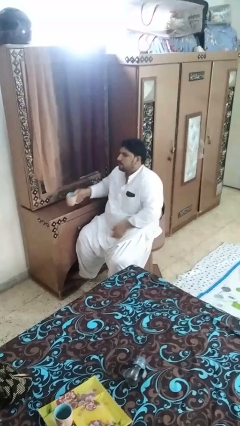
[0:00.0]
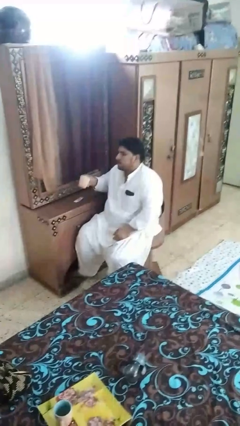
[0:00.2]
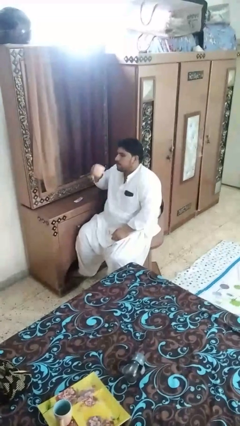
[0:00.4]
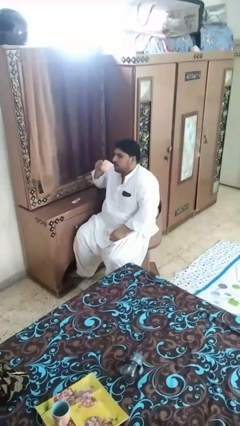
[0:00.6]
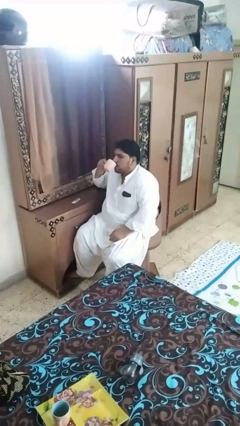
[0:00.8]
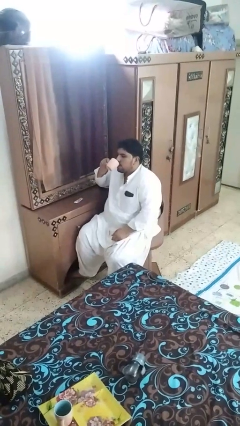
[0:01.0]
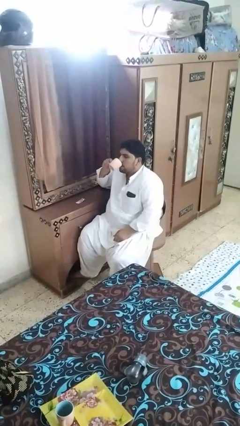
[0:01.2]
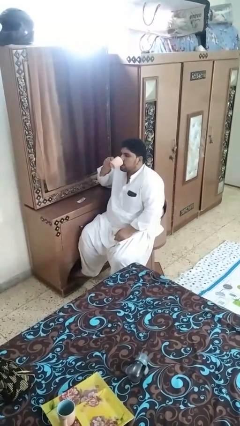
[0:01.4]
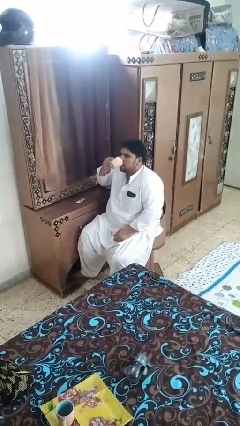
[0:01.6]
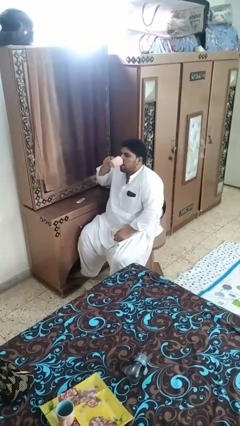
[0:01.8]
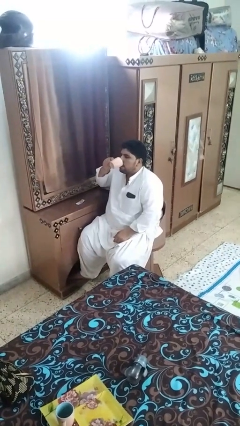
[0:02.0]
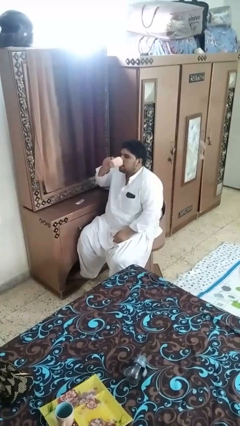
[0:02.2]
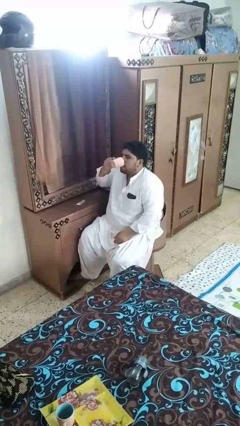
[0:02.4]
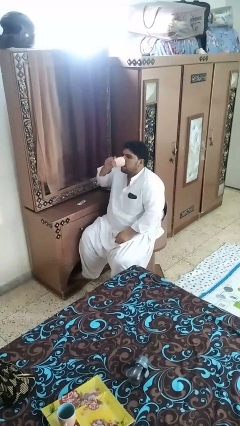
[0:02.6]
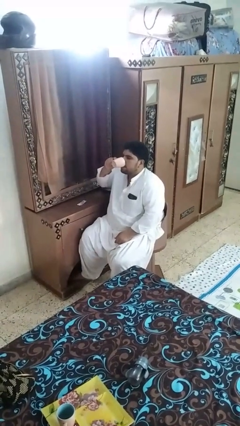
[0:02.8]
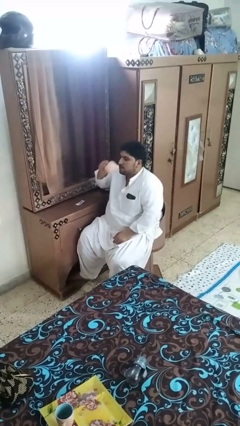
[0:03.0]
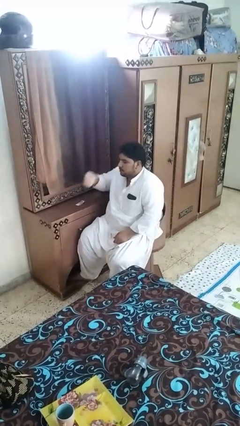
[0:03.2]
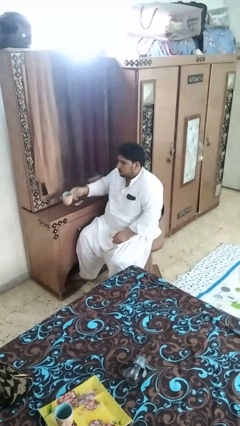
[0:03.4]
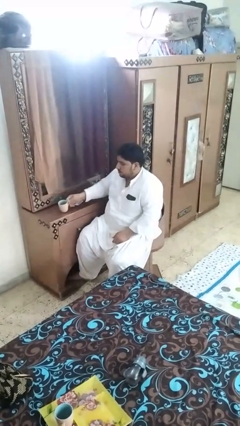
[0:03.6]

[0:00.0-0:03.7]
person drinks from cup

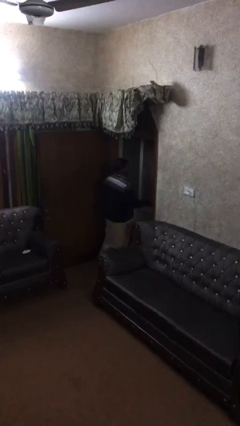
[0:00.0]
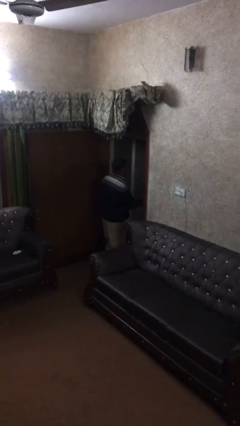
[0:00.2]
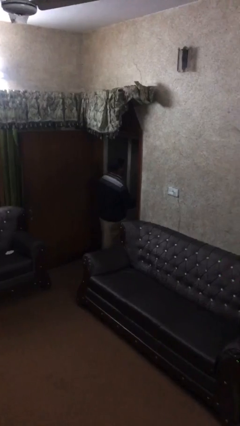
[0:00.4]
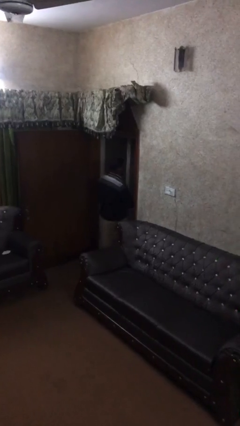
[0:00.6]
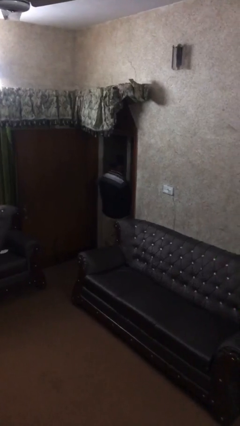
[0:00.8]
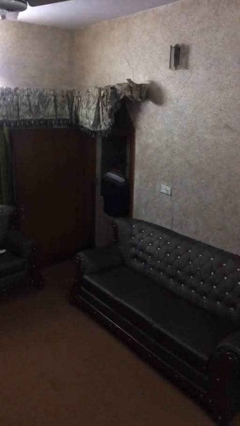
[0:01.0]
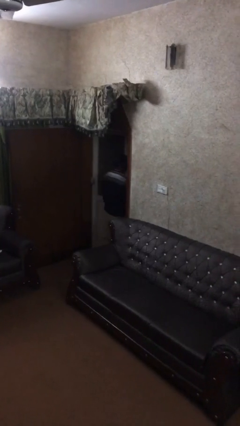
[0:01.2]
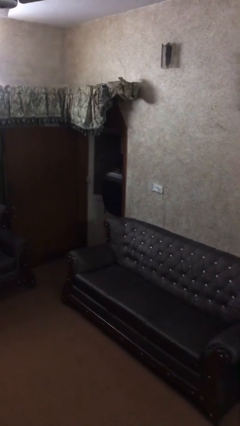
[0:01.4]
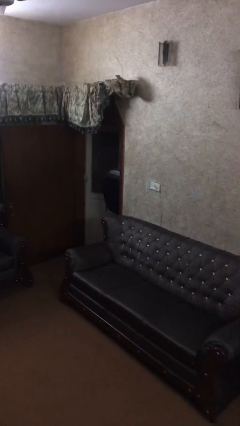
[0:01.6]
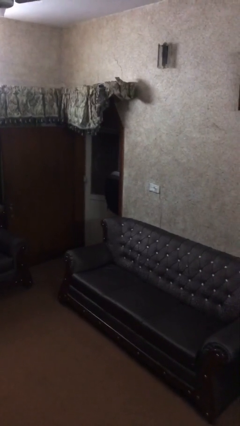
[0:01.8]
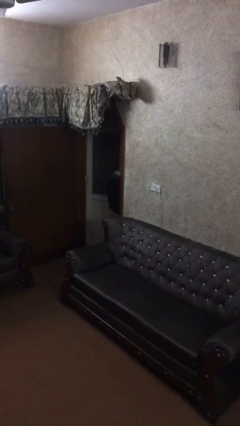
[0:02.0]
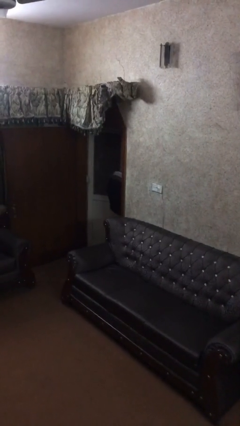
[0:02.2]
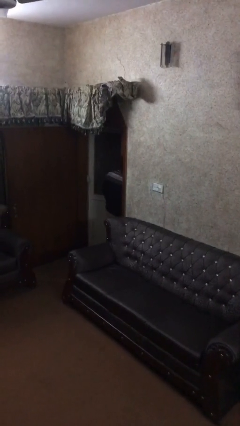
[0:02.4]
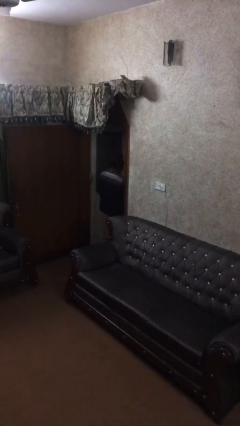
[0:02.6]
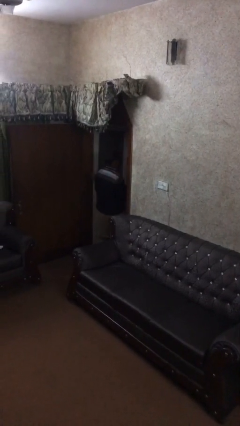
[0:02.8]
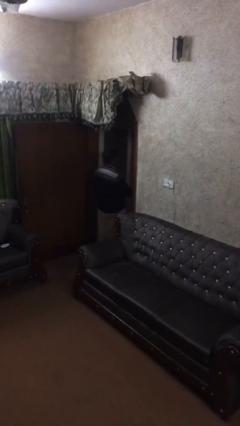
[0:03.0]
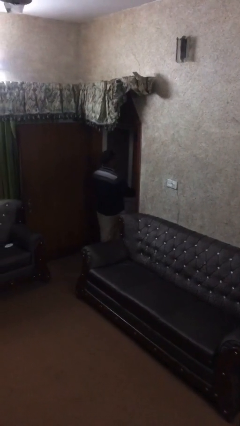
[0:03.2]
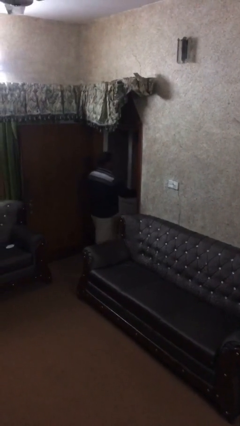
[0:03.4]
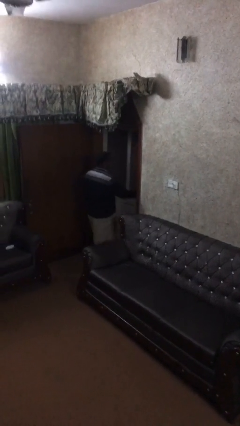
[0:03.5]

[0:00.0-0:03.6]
person opens facility door

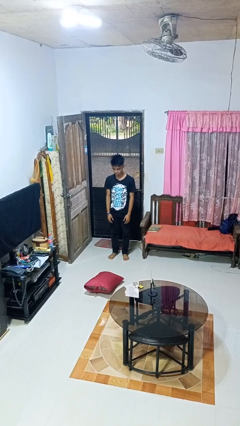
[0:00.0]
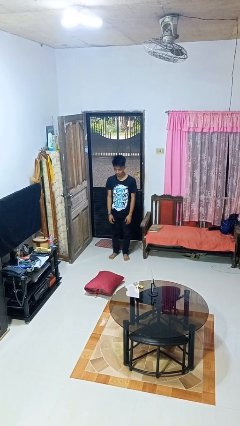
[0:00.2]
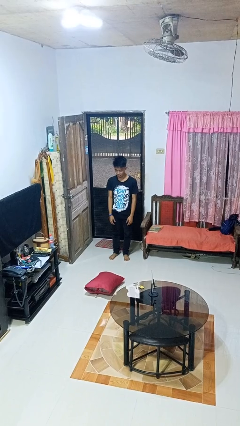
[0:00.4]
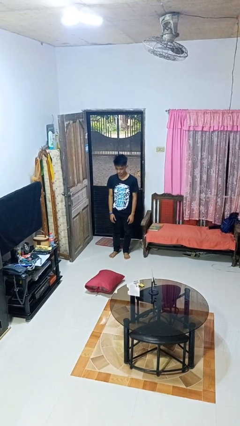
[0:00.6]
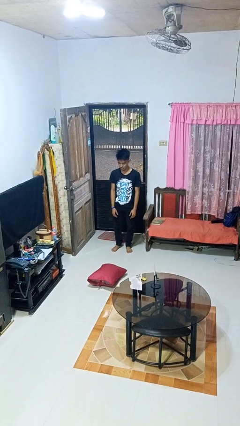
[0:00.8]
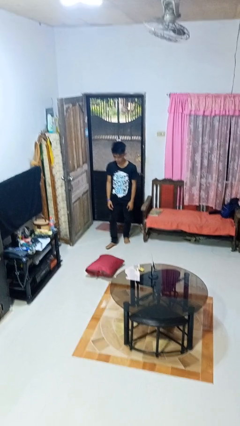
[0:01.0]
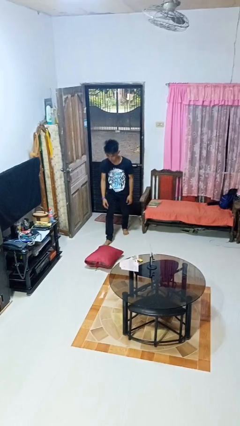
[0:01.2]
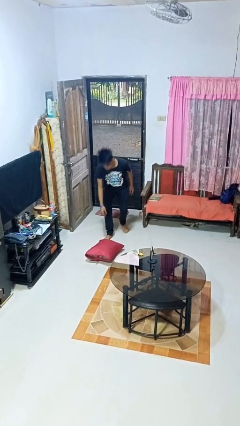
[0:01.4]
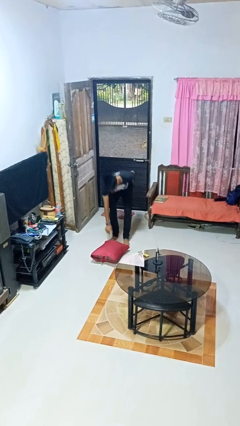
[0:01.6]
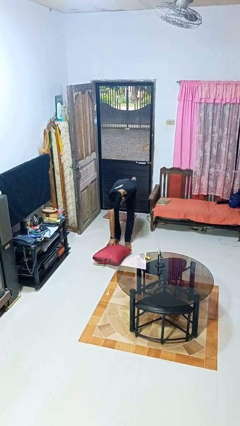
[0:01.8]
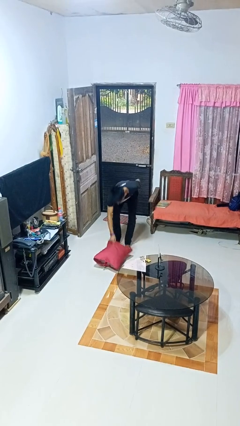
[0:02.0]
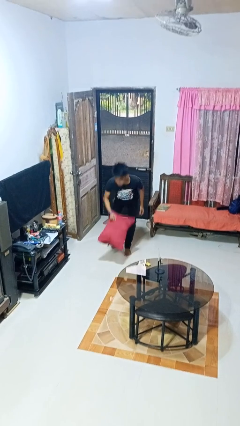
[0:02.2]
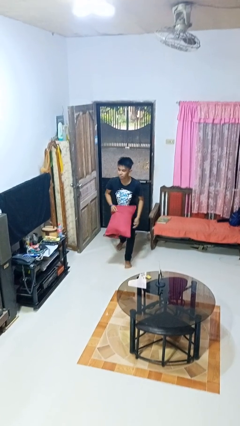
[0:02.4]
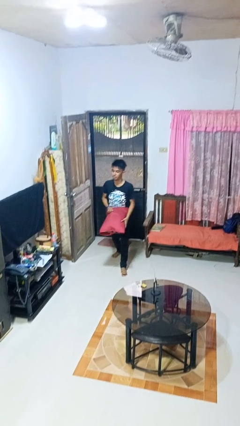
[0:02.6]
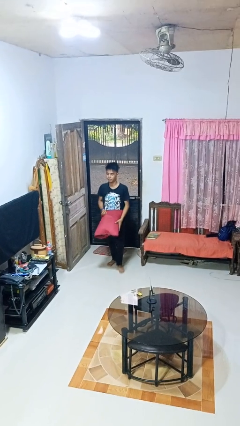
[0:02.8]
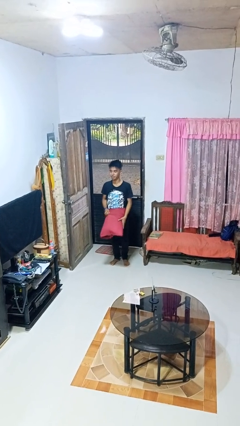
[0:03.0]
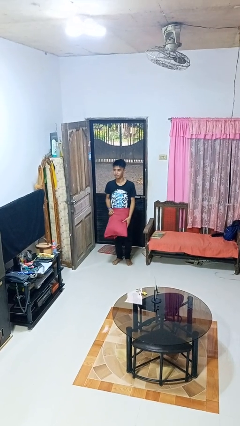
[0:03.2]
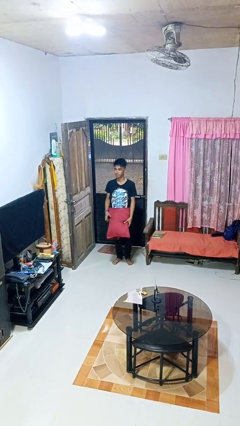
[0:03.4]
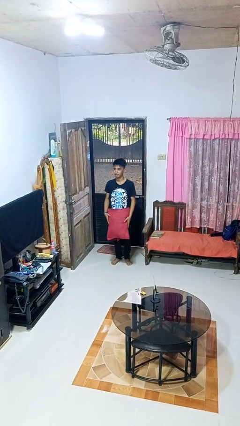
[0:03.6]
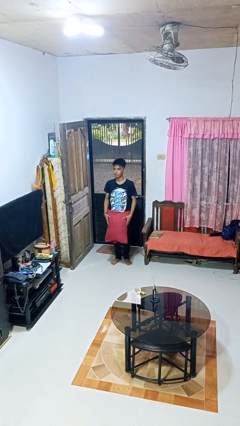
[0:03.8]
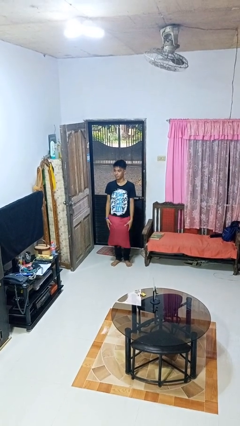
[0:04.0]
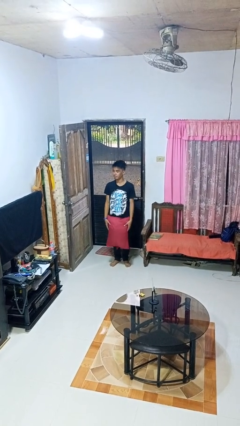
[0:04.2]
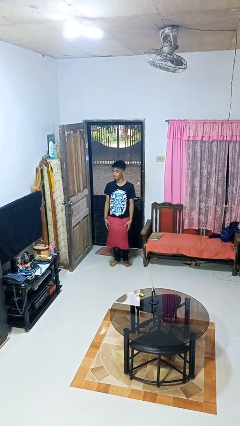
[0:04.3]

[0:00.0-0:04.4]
person picks up object from floor

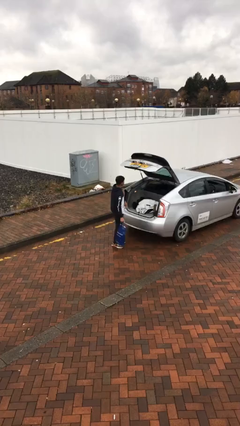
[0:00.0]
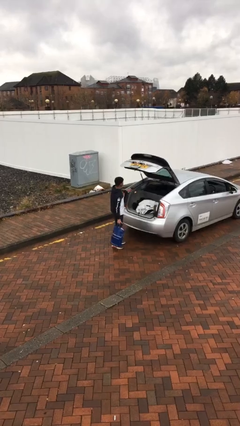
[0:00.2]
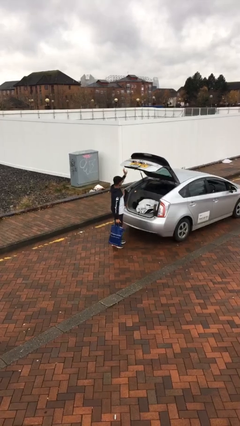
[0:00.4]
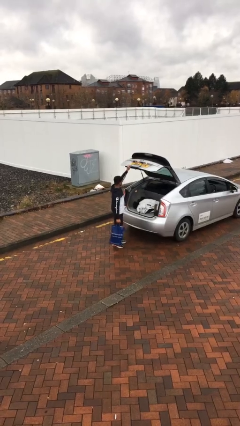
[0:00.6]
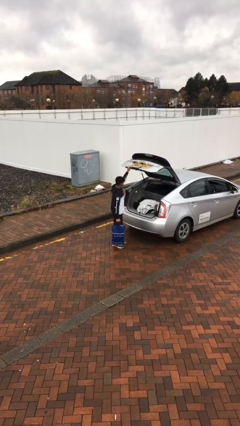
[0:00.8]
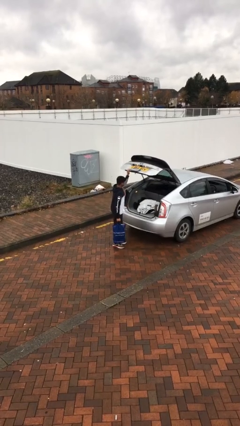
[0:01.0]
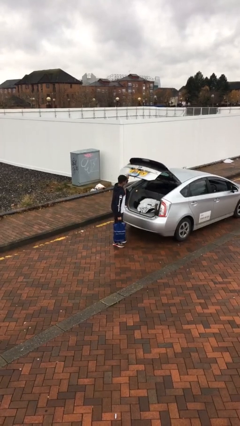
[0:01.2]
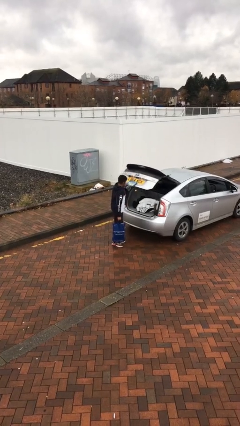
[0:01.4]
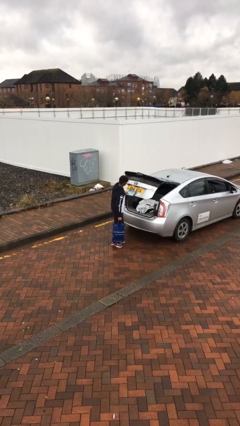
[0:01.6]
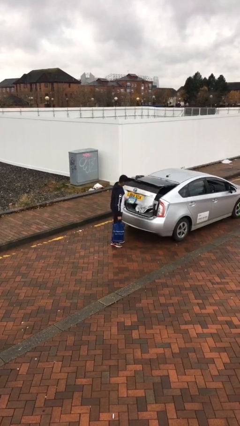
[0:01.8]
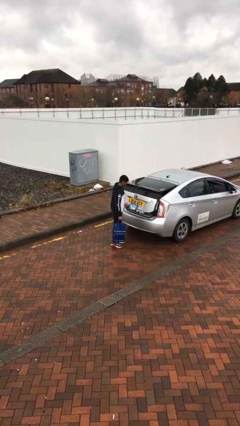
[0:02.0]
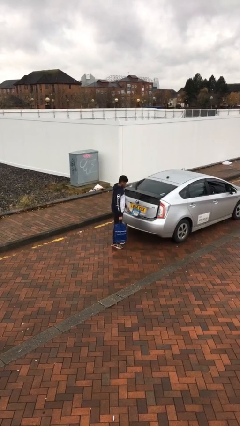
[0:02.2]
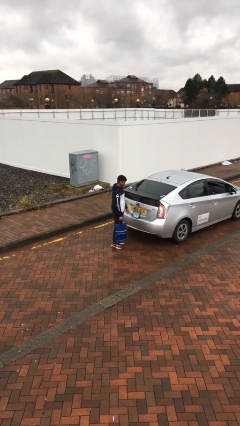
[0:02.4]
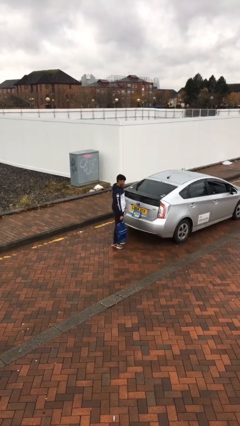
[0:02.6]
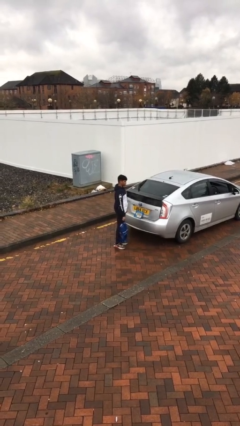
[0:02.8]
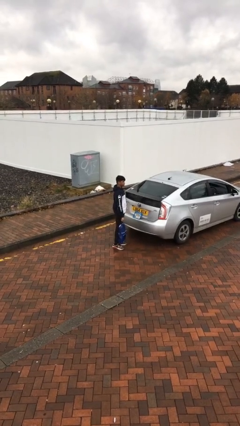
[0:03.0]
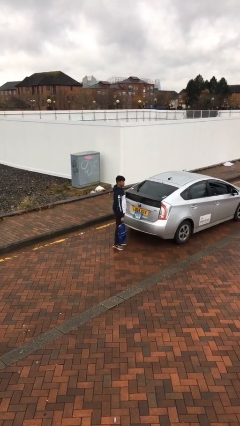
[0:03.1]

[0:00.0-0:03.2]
person closes car trunk

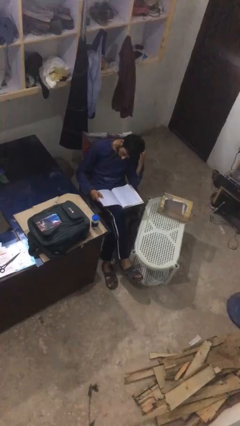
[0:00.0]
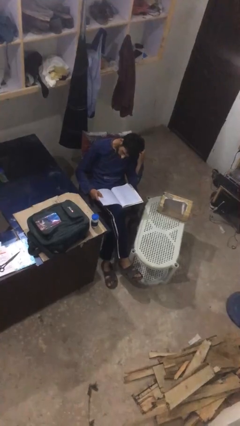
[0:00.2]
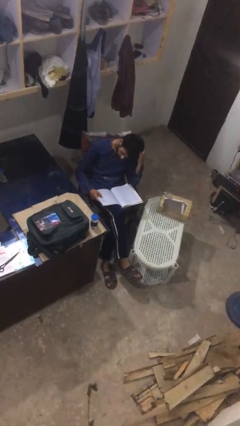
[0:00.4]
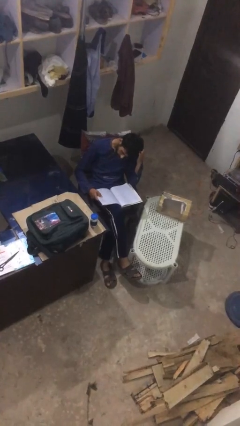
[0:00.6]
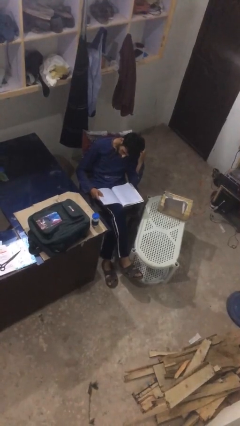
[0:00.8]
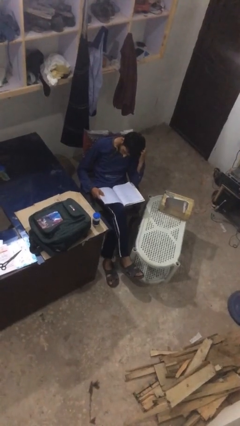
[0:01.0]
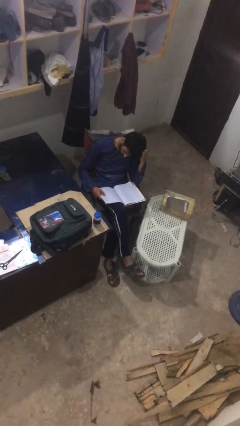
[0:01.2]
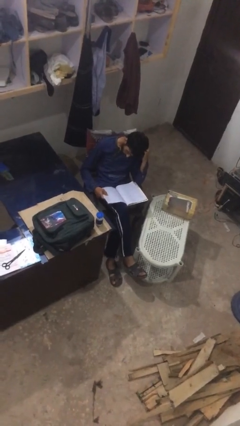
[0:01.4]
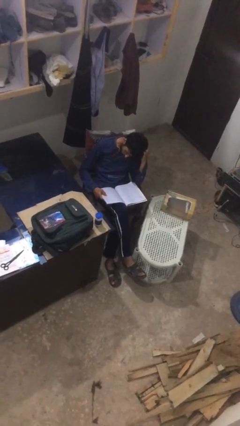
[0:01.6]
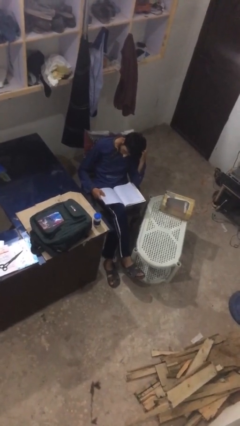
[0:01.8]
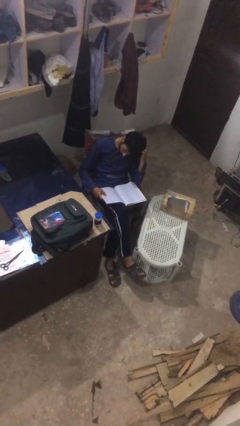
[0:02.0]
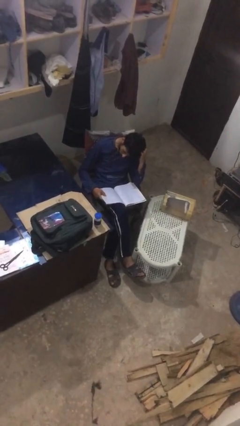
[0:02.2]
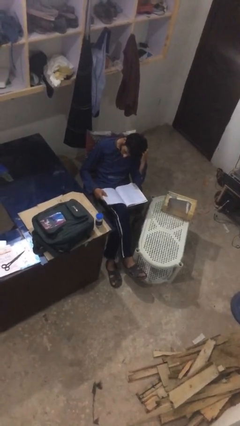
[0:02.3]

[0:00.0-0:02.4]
person reads document

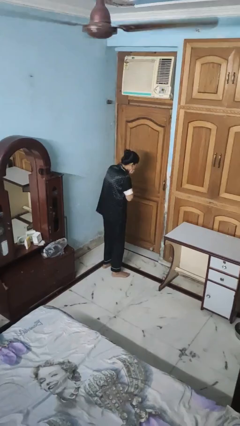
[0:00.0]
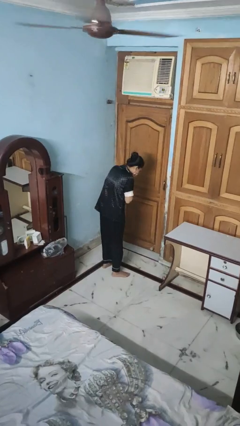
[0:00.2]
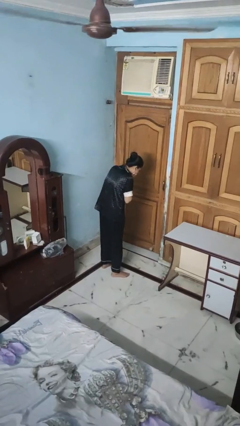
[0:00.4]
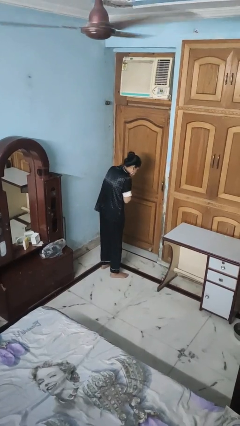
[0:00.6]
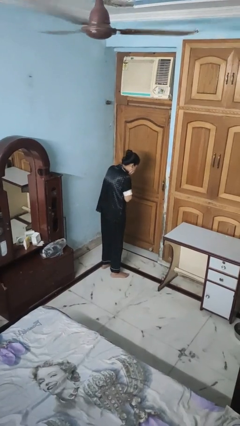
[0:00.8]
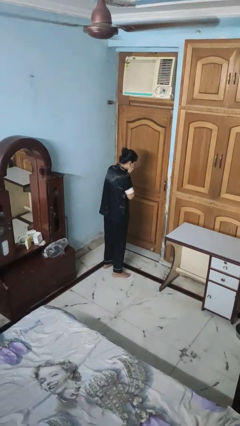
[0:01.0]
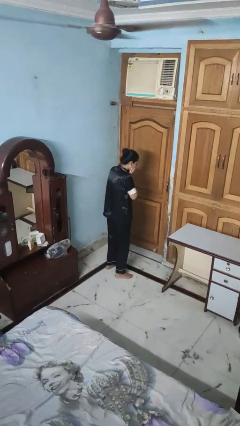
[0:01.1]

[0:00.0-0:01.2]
person sneezes into hand
